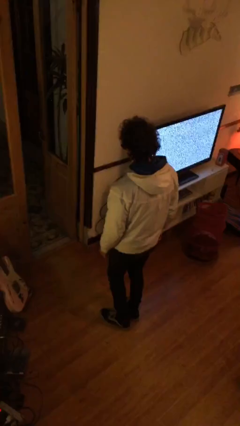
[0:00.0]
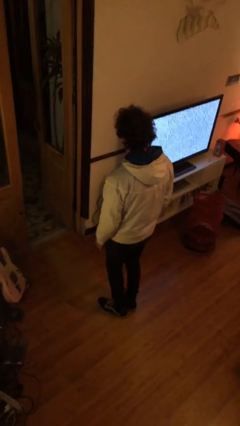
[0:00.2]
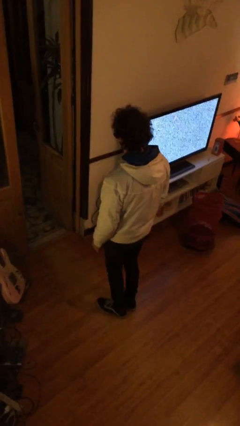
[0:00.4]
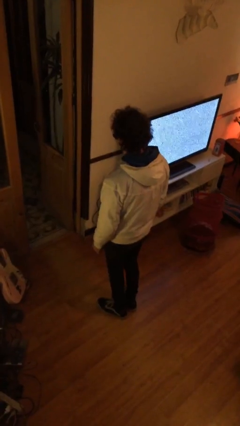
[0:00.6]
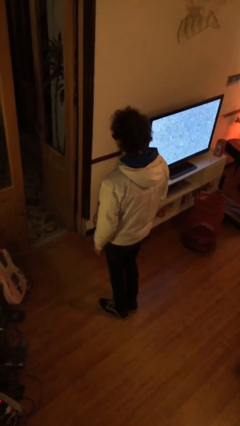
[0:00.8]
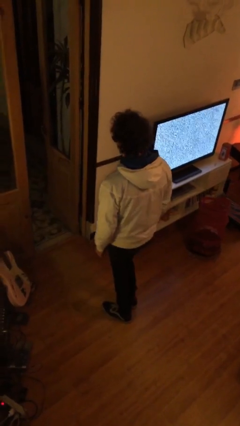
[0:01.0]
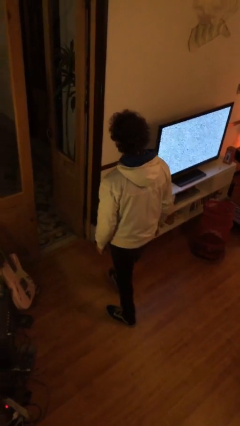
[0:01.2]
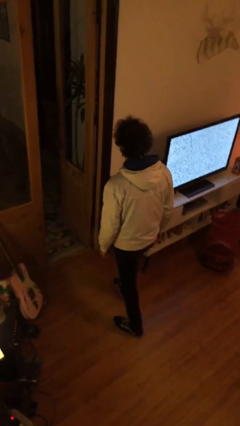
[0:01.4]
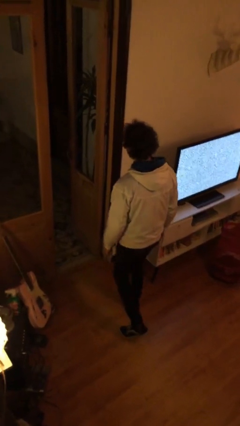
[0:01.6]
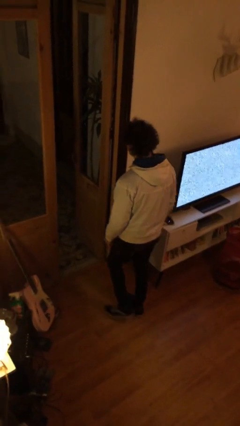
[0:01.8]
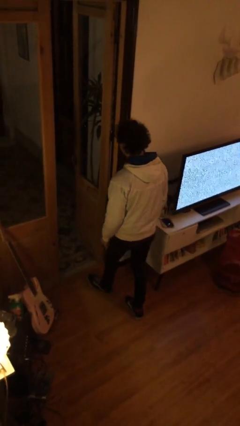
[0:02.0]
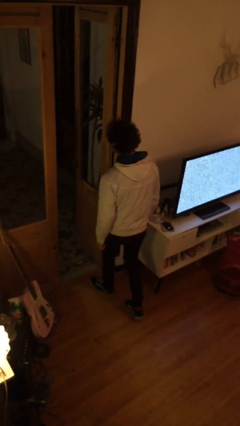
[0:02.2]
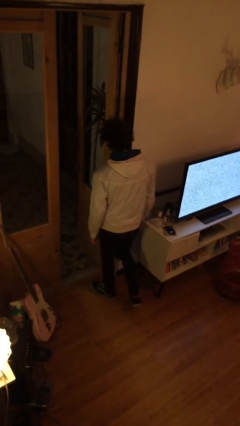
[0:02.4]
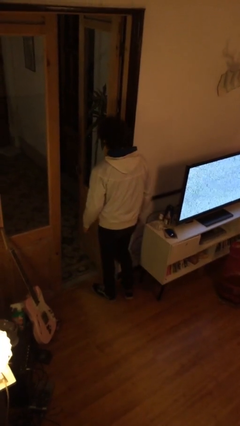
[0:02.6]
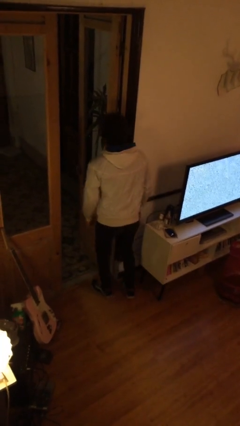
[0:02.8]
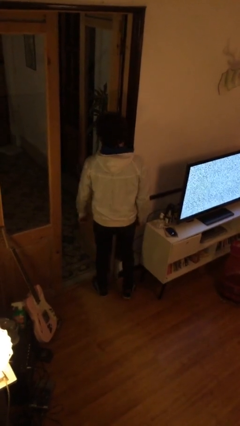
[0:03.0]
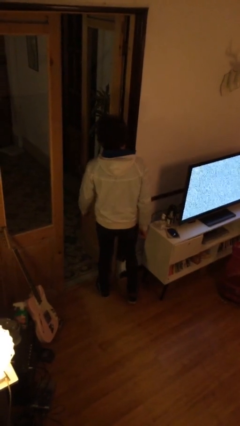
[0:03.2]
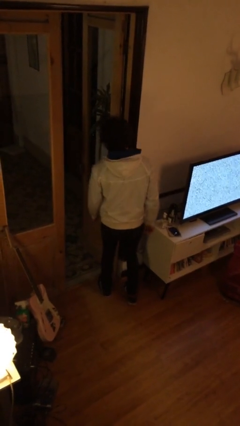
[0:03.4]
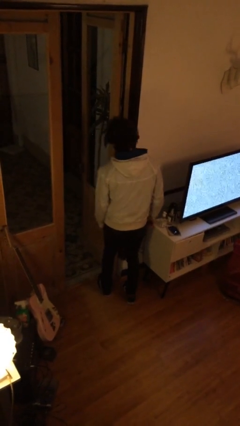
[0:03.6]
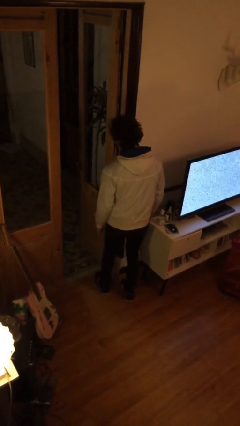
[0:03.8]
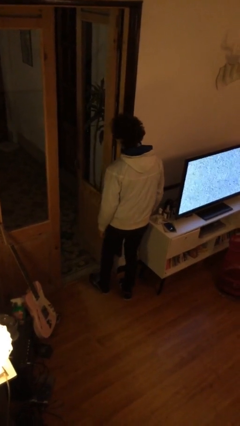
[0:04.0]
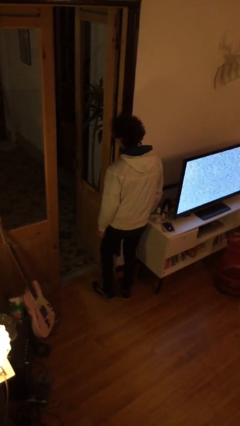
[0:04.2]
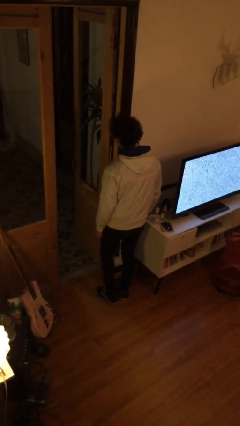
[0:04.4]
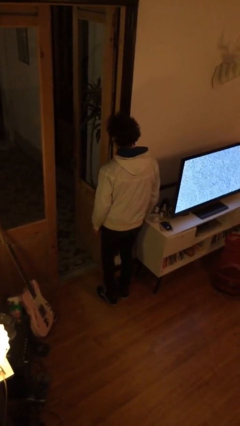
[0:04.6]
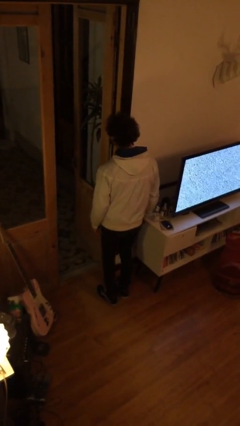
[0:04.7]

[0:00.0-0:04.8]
person bumps into wall

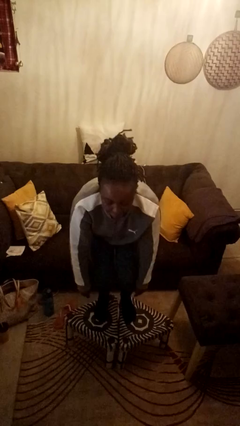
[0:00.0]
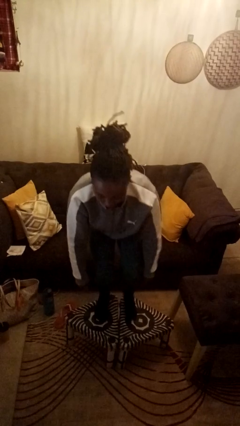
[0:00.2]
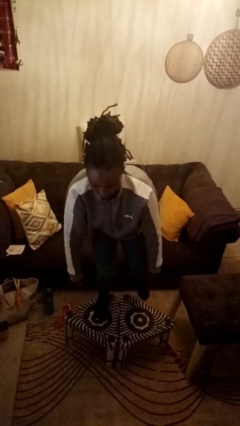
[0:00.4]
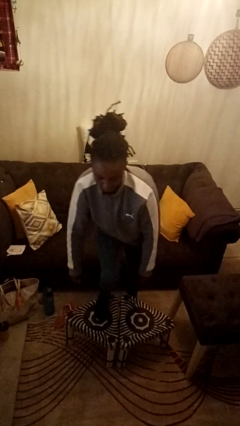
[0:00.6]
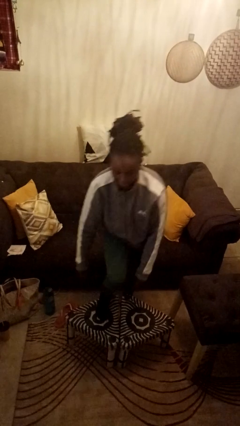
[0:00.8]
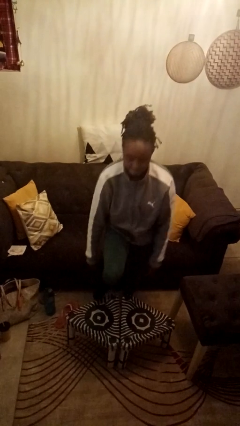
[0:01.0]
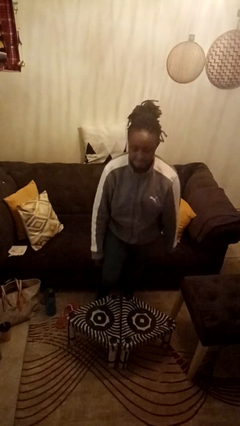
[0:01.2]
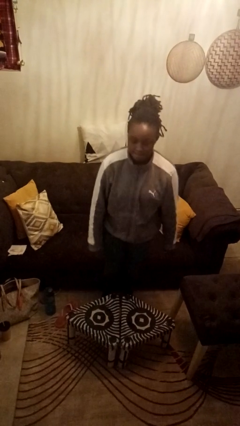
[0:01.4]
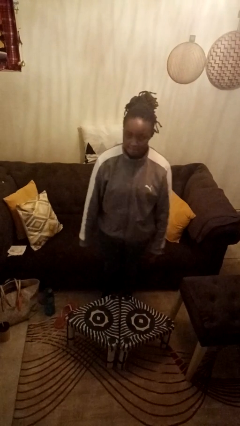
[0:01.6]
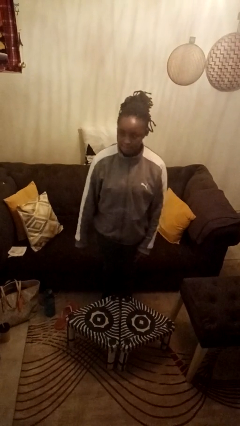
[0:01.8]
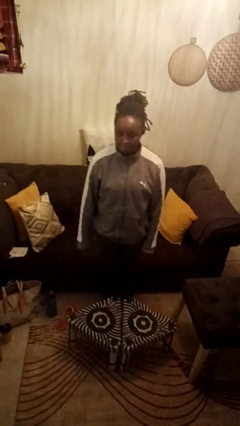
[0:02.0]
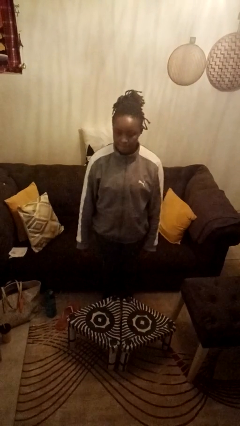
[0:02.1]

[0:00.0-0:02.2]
person climbs off table

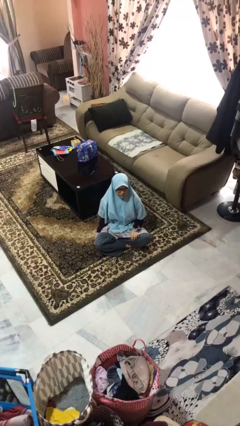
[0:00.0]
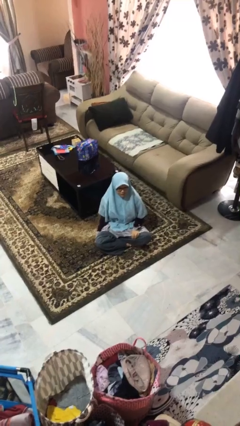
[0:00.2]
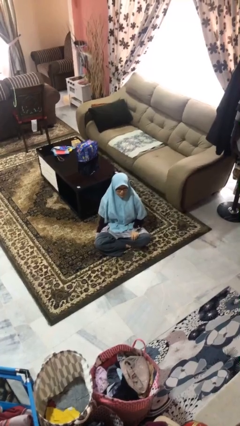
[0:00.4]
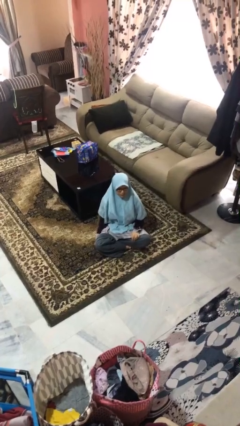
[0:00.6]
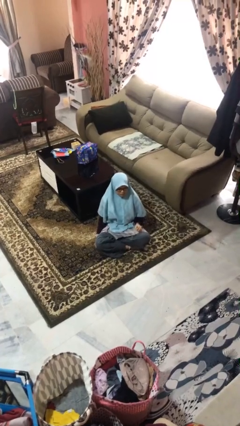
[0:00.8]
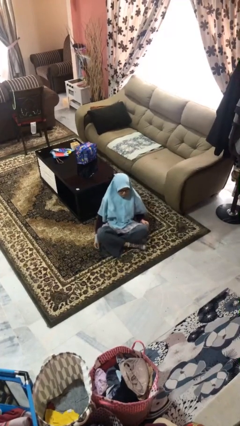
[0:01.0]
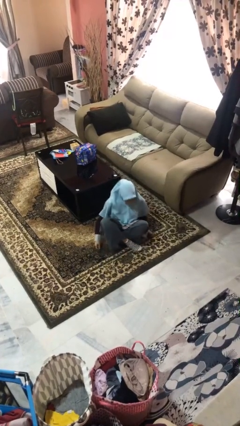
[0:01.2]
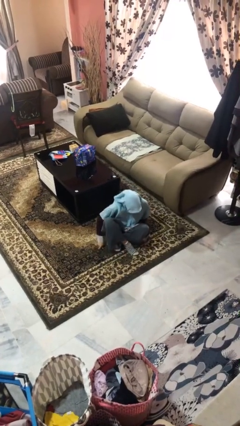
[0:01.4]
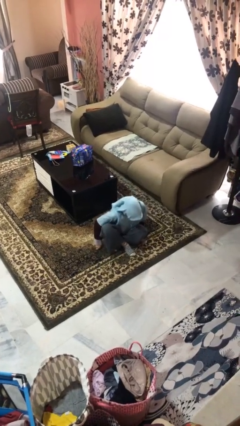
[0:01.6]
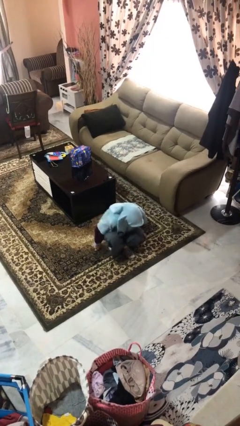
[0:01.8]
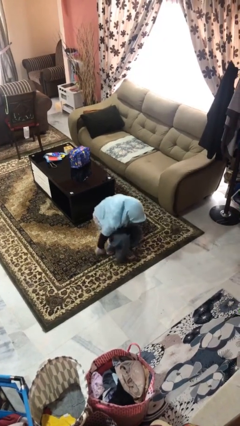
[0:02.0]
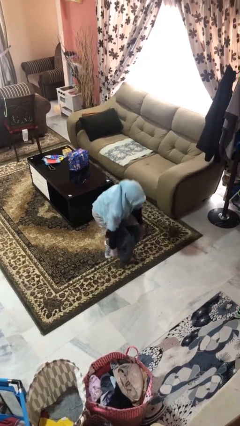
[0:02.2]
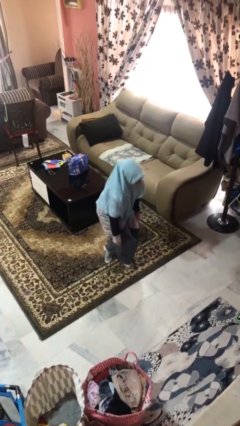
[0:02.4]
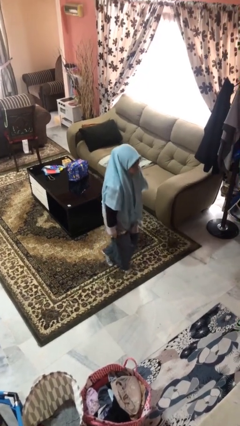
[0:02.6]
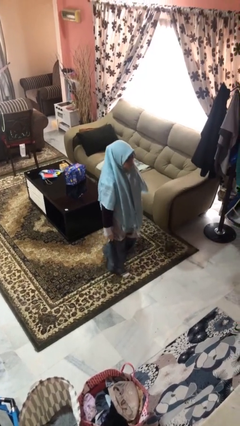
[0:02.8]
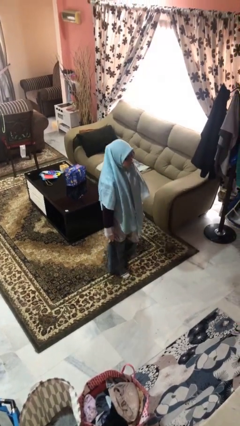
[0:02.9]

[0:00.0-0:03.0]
person stands up from floor

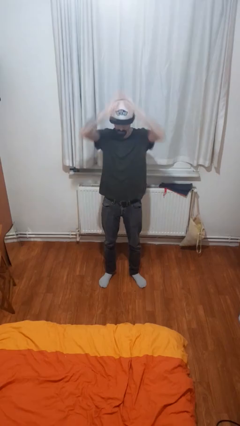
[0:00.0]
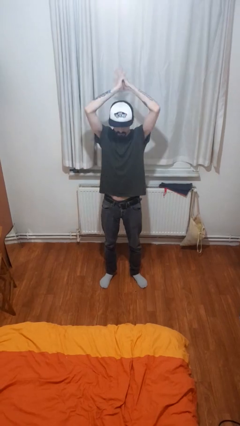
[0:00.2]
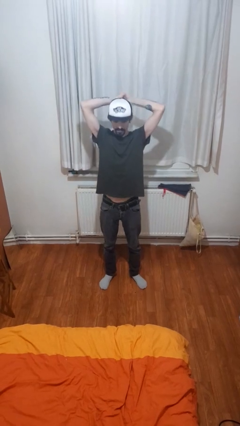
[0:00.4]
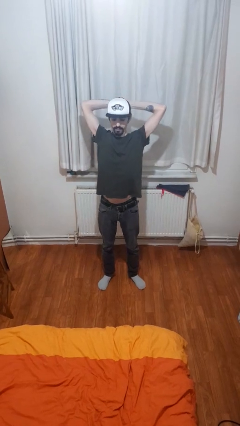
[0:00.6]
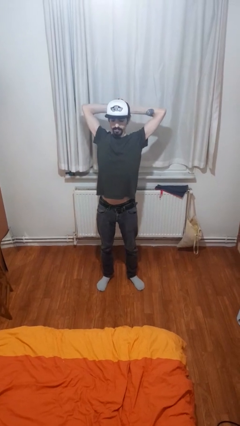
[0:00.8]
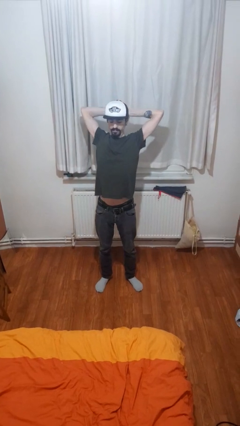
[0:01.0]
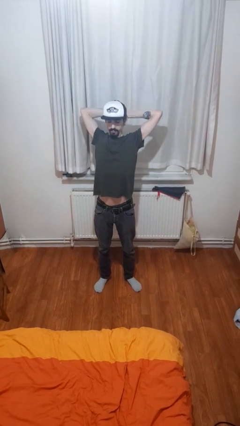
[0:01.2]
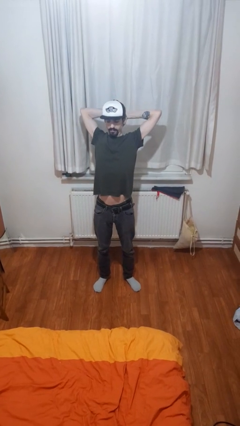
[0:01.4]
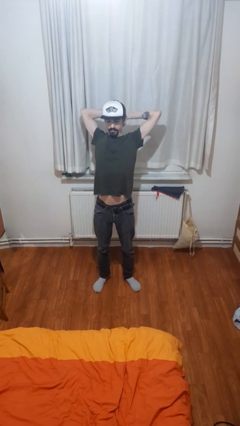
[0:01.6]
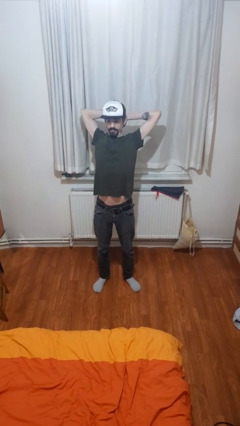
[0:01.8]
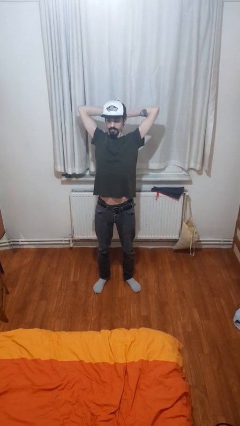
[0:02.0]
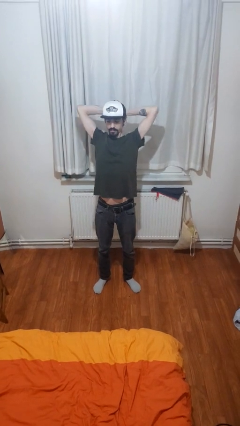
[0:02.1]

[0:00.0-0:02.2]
person stretches arms over head

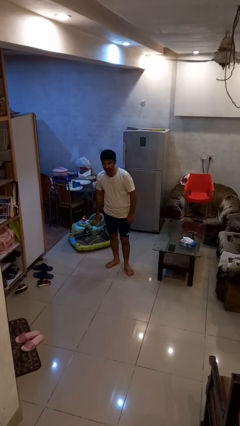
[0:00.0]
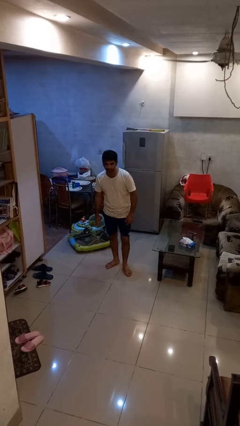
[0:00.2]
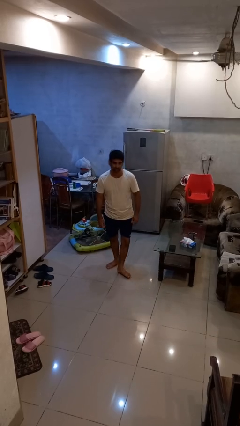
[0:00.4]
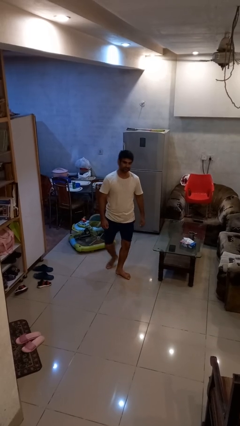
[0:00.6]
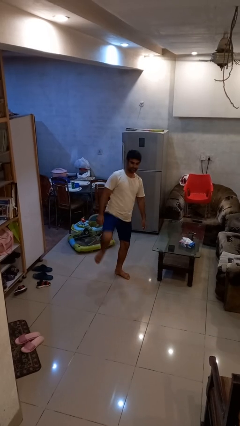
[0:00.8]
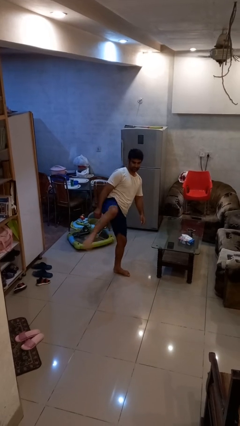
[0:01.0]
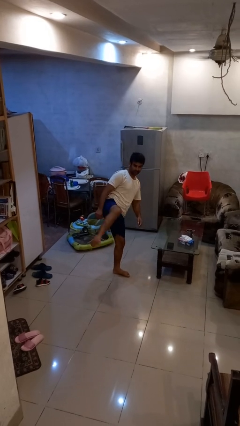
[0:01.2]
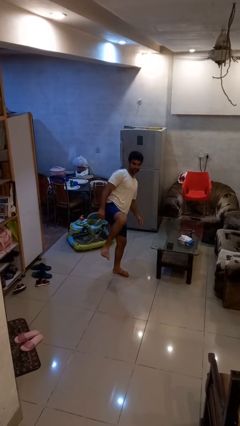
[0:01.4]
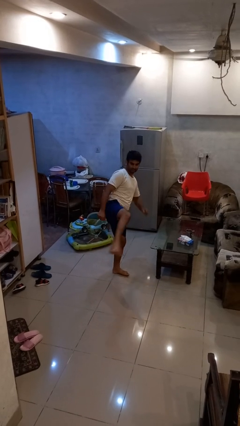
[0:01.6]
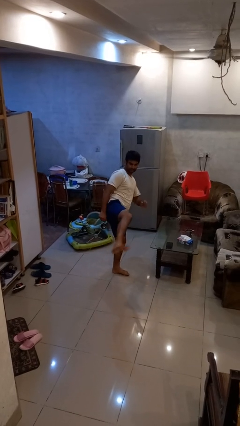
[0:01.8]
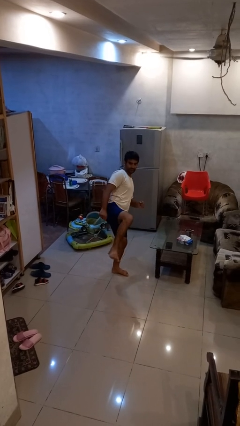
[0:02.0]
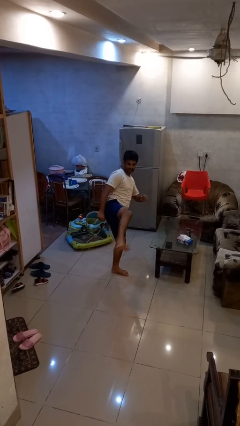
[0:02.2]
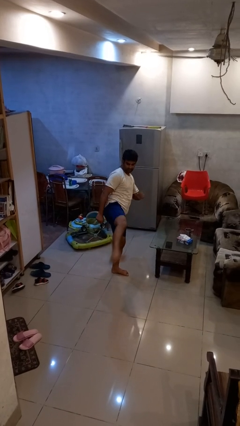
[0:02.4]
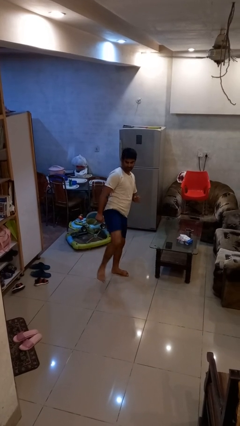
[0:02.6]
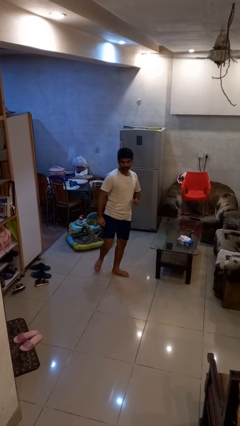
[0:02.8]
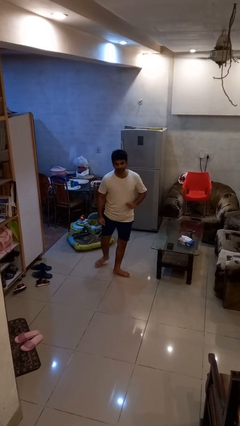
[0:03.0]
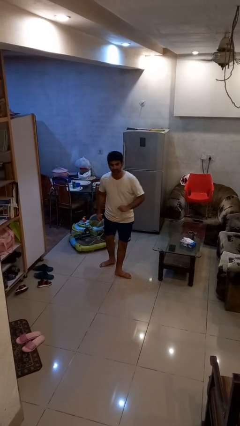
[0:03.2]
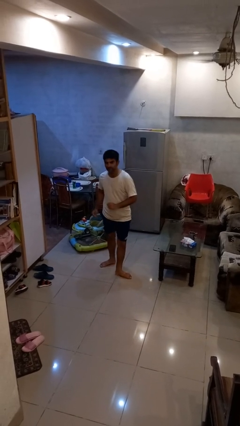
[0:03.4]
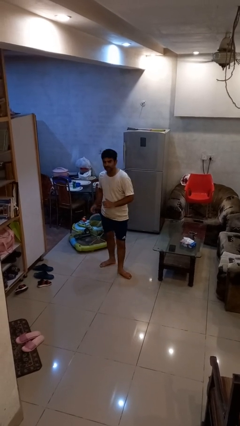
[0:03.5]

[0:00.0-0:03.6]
person karate kicks

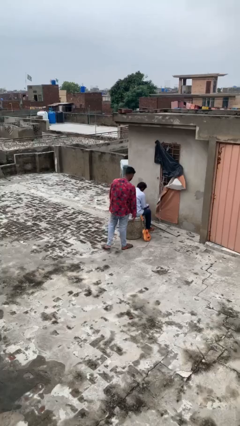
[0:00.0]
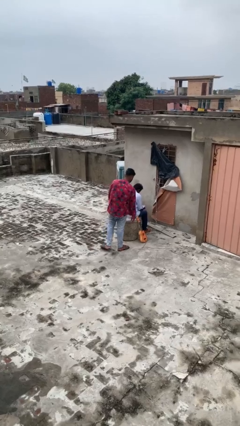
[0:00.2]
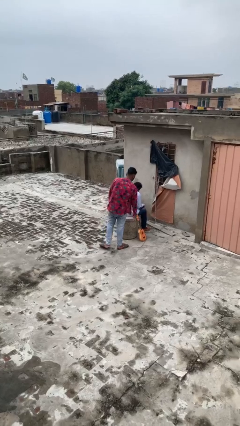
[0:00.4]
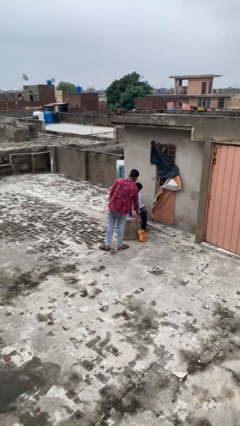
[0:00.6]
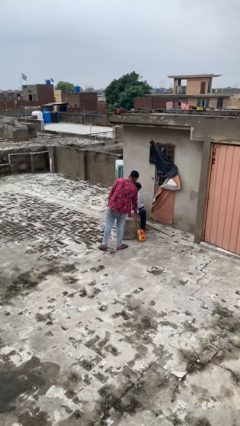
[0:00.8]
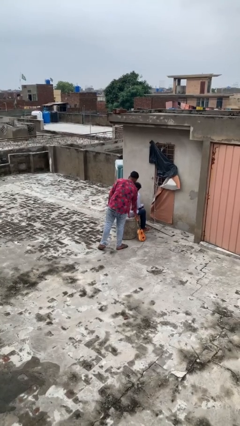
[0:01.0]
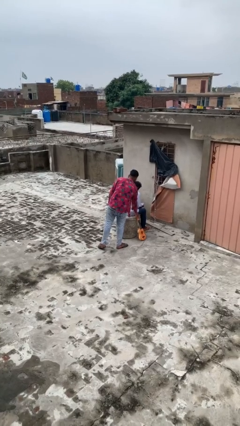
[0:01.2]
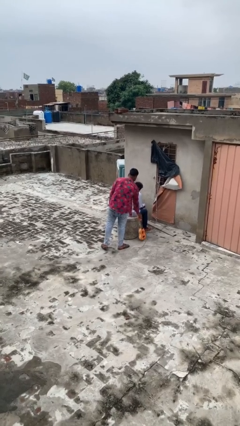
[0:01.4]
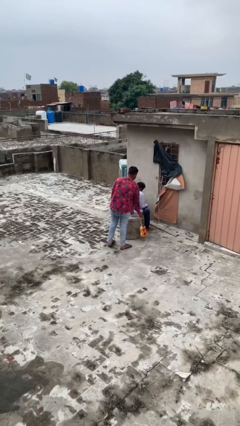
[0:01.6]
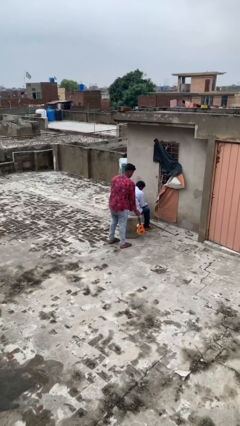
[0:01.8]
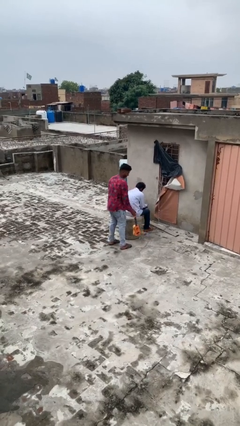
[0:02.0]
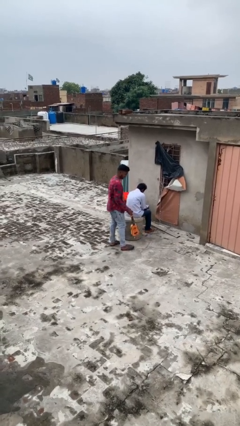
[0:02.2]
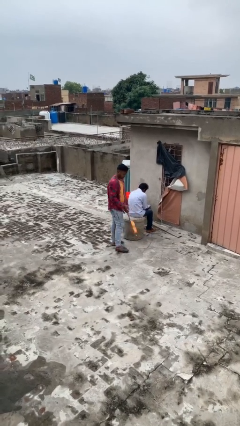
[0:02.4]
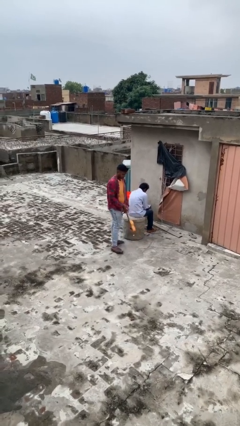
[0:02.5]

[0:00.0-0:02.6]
person steals object from person
